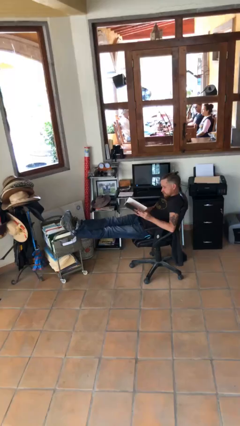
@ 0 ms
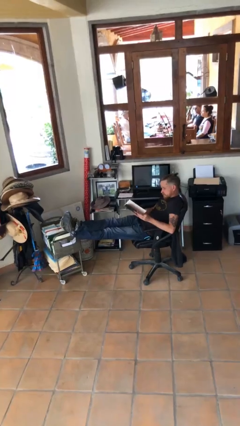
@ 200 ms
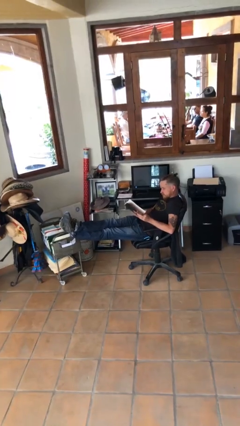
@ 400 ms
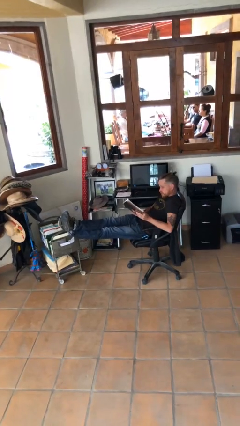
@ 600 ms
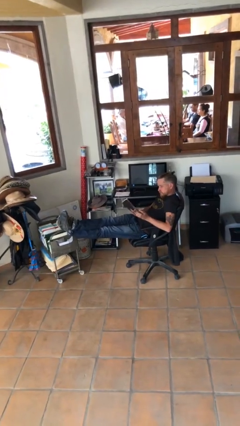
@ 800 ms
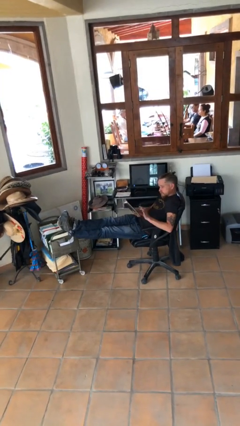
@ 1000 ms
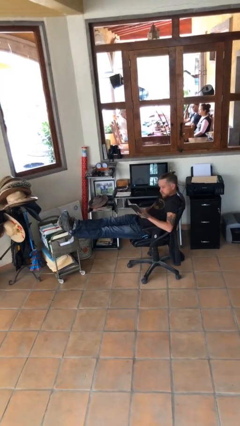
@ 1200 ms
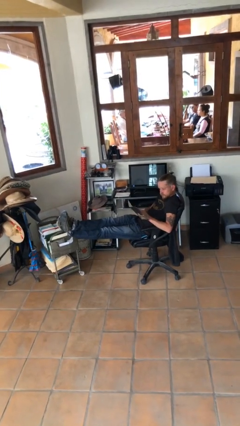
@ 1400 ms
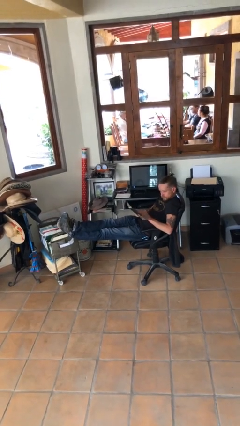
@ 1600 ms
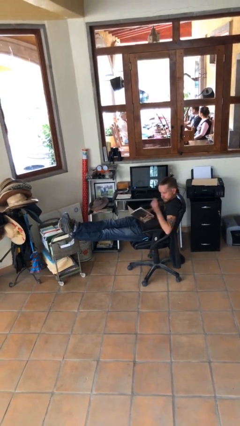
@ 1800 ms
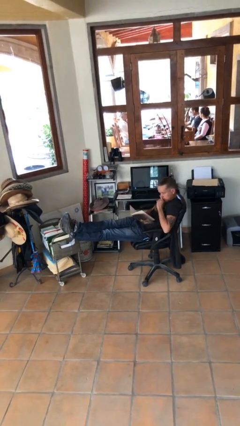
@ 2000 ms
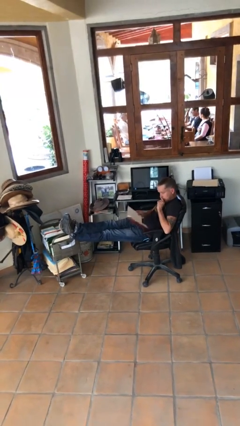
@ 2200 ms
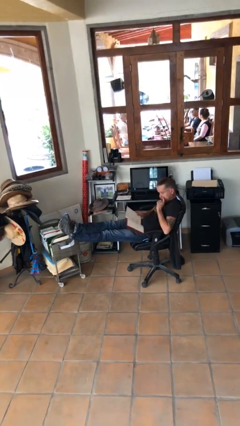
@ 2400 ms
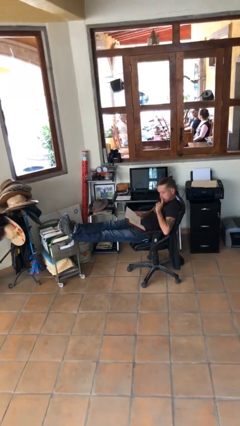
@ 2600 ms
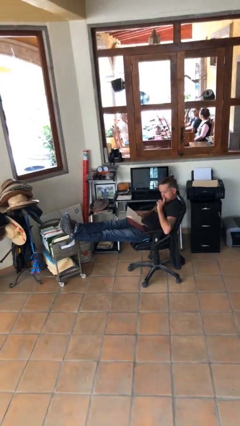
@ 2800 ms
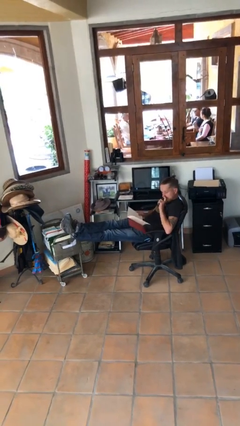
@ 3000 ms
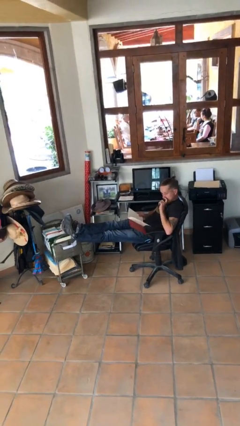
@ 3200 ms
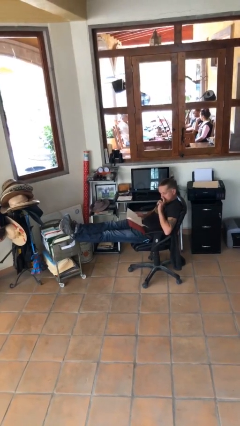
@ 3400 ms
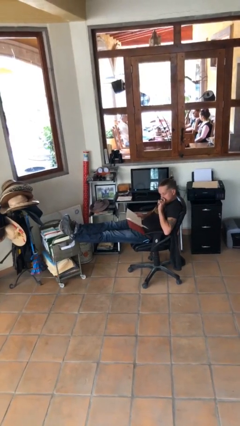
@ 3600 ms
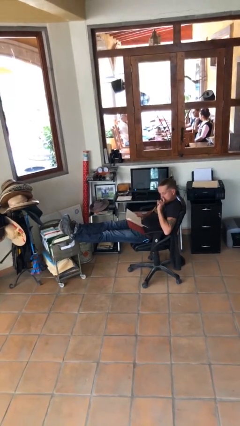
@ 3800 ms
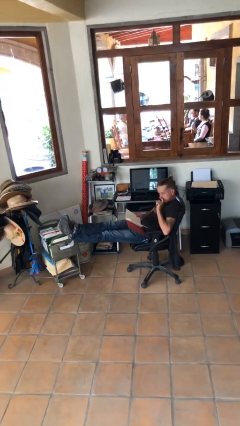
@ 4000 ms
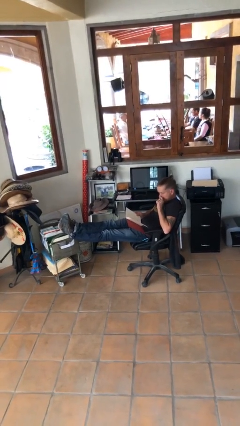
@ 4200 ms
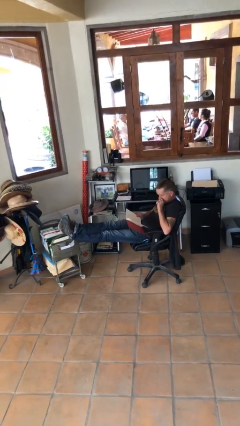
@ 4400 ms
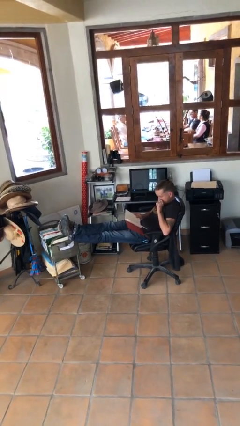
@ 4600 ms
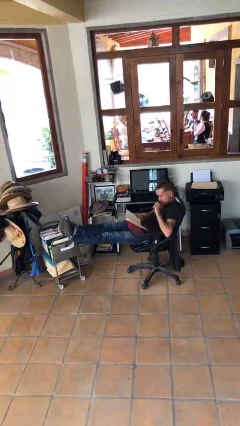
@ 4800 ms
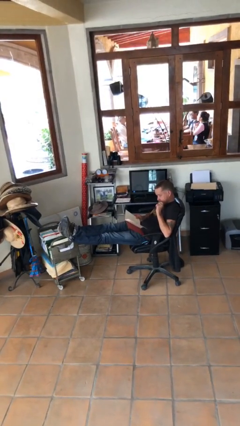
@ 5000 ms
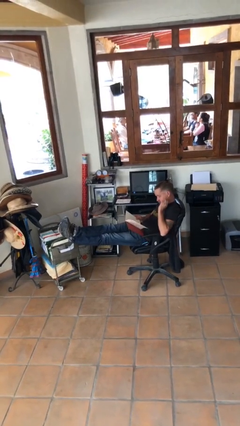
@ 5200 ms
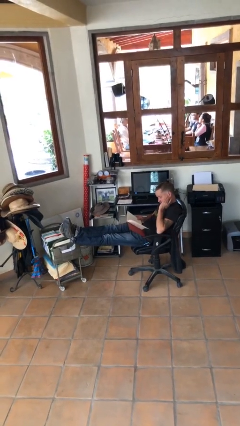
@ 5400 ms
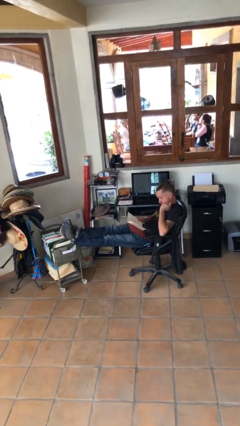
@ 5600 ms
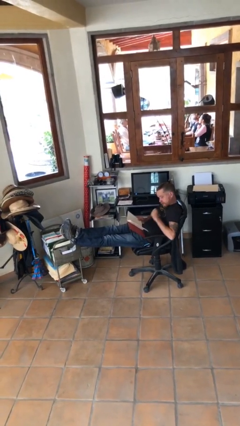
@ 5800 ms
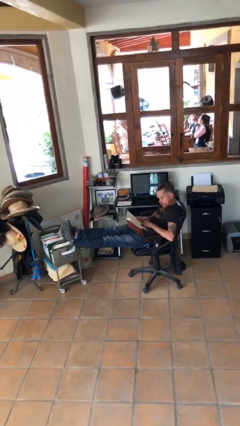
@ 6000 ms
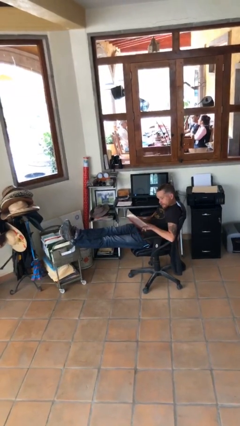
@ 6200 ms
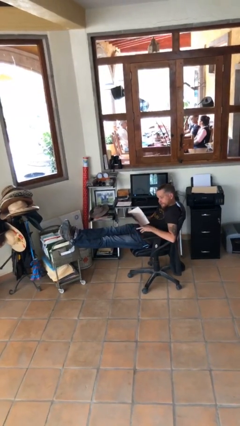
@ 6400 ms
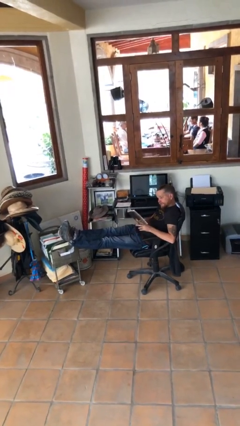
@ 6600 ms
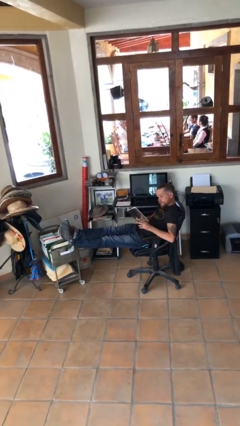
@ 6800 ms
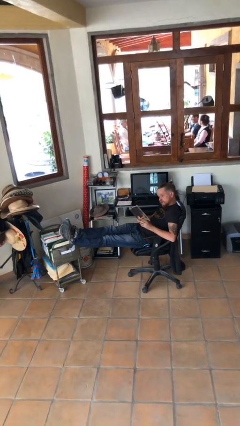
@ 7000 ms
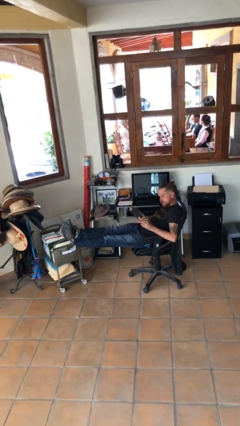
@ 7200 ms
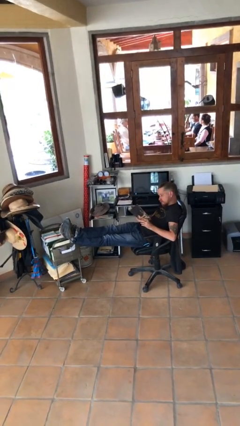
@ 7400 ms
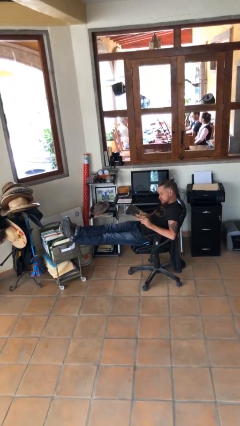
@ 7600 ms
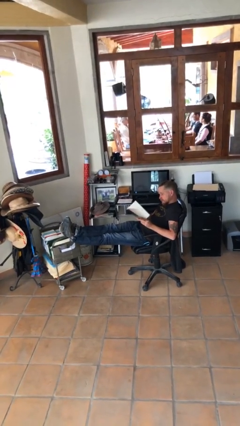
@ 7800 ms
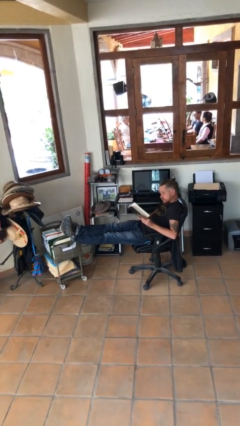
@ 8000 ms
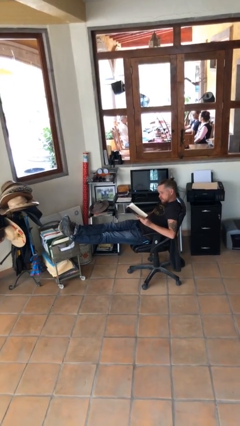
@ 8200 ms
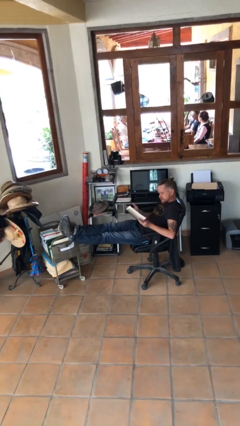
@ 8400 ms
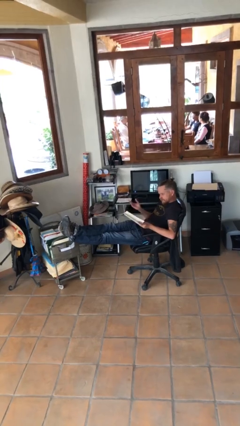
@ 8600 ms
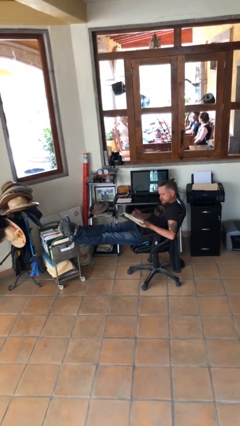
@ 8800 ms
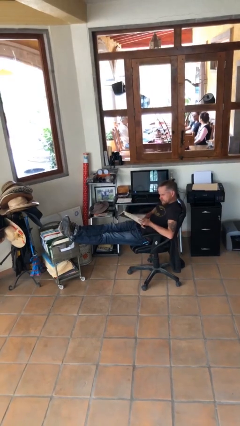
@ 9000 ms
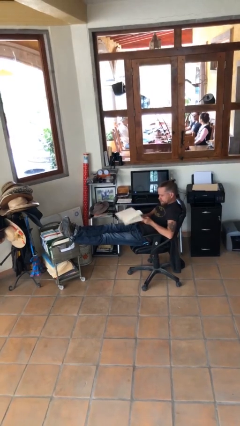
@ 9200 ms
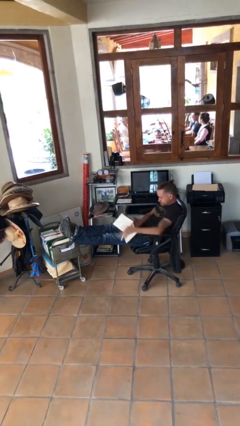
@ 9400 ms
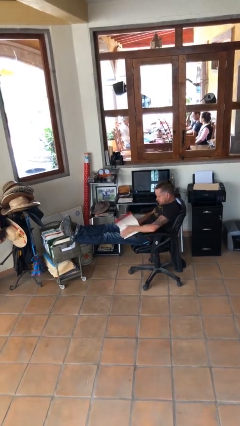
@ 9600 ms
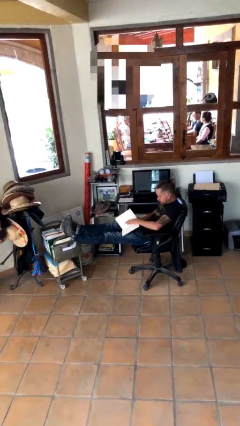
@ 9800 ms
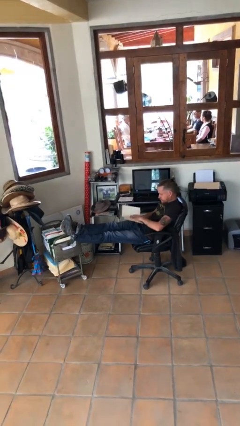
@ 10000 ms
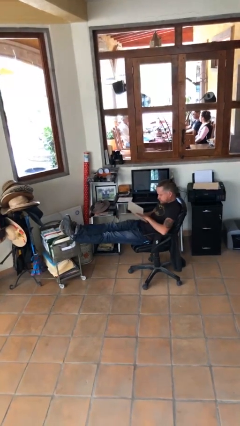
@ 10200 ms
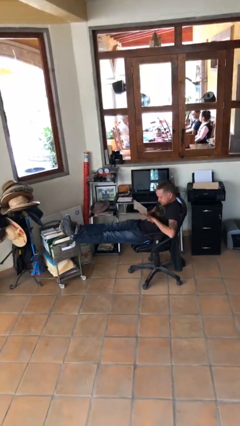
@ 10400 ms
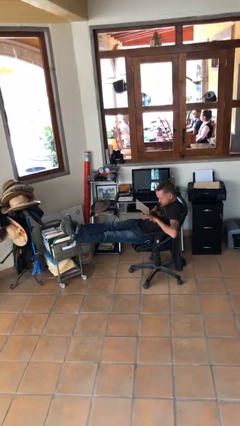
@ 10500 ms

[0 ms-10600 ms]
person reads document

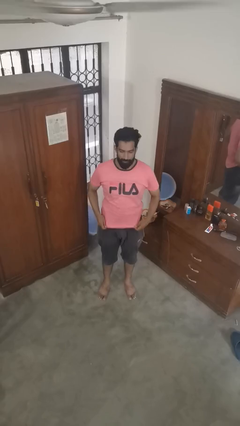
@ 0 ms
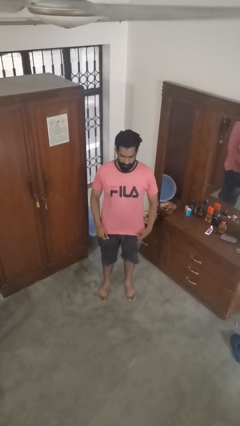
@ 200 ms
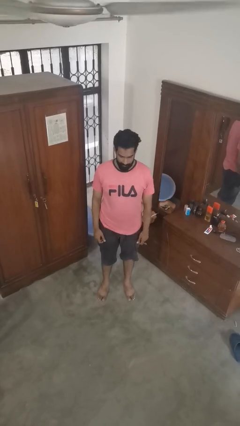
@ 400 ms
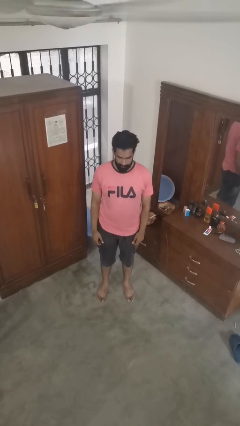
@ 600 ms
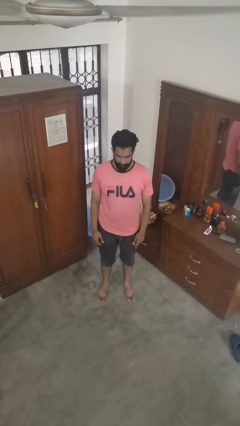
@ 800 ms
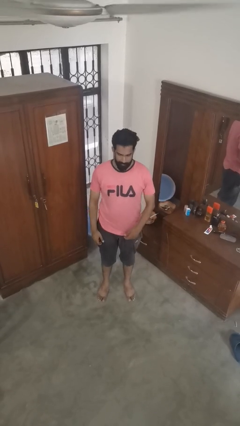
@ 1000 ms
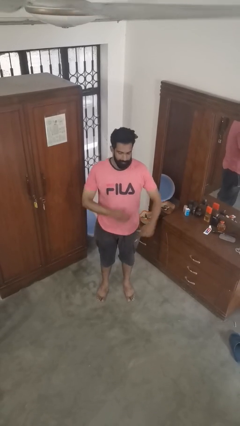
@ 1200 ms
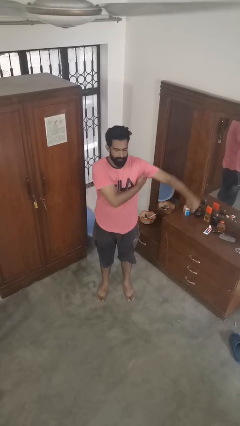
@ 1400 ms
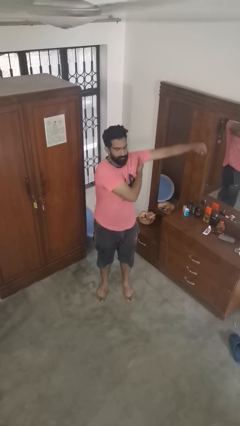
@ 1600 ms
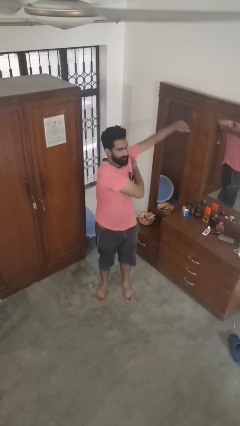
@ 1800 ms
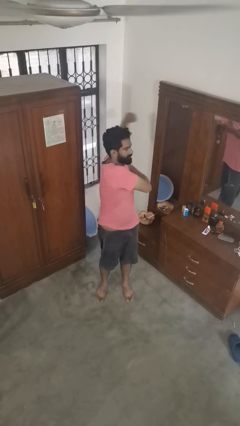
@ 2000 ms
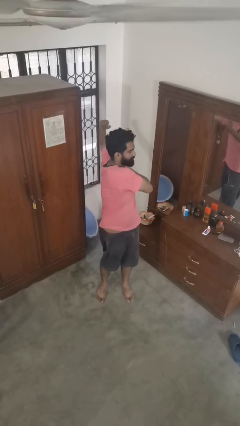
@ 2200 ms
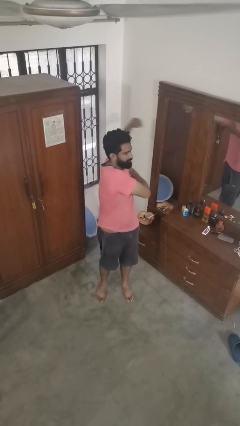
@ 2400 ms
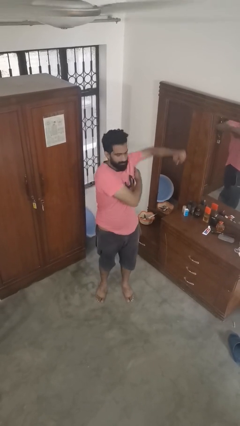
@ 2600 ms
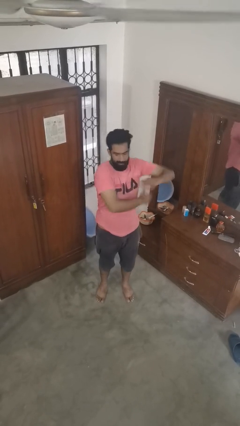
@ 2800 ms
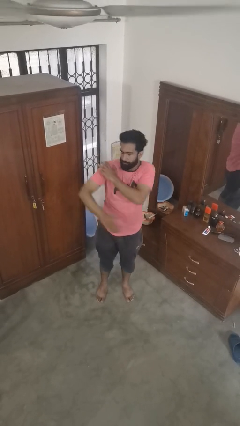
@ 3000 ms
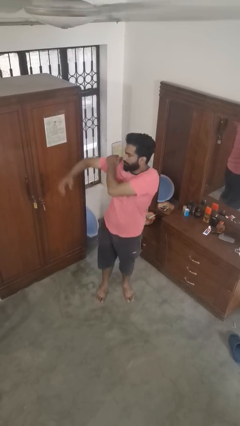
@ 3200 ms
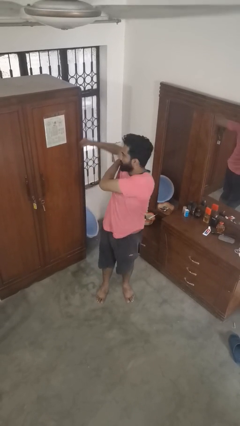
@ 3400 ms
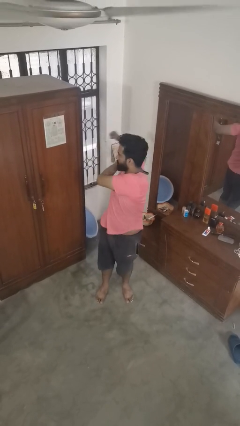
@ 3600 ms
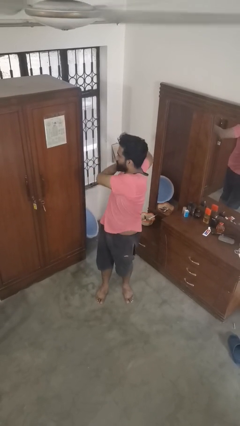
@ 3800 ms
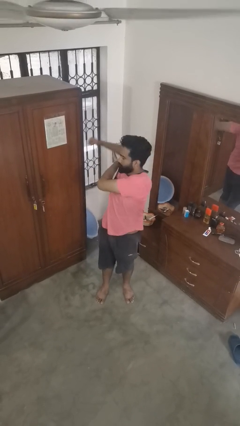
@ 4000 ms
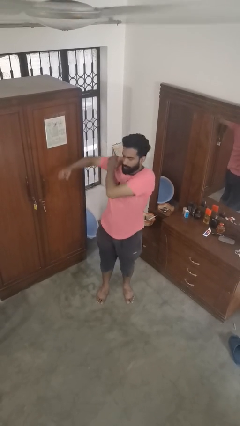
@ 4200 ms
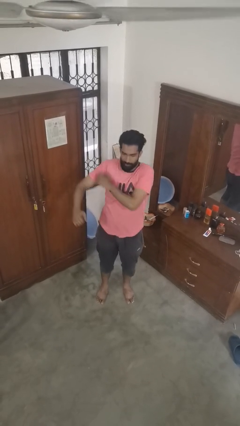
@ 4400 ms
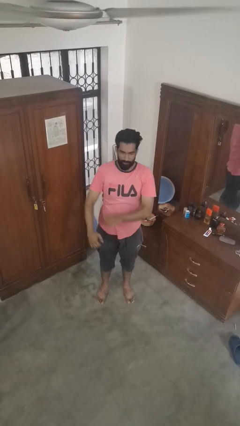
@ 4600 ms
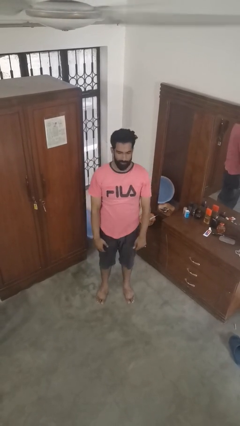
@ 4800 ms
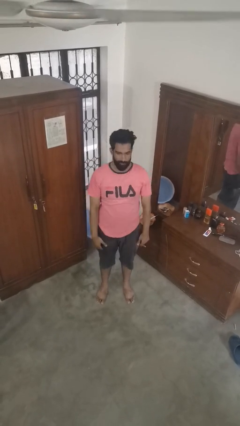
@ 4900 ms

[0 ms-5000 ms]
person stretches arms to side

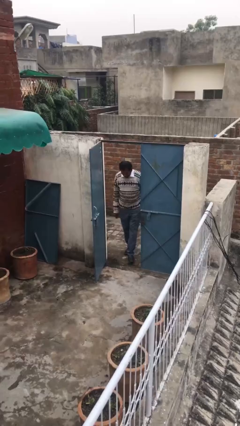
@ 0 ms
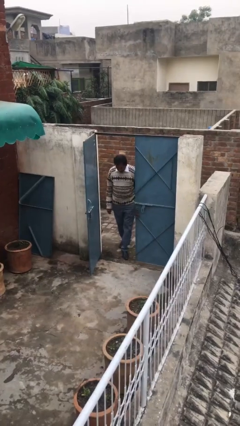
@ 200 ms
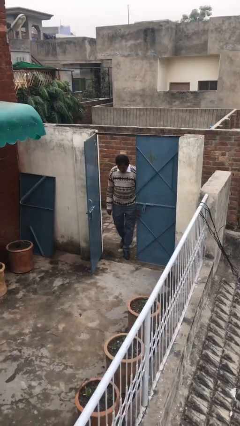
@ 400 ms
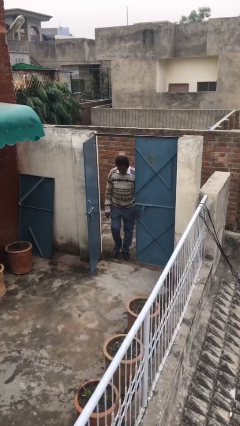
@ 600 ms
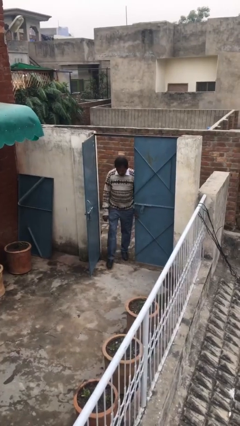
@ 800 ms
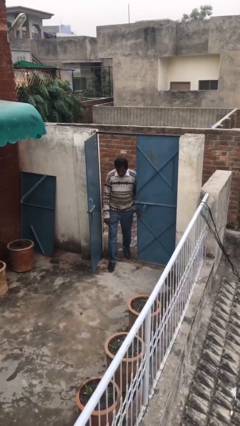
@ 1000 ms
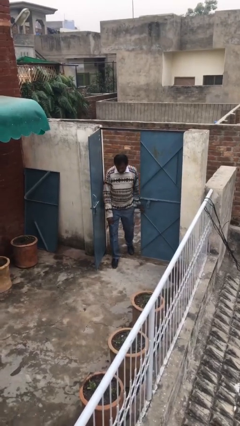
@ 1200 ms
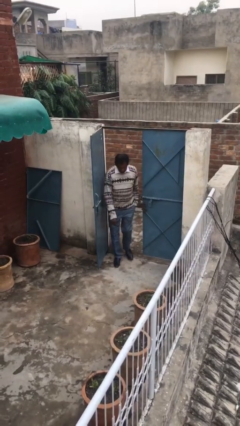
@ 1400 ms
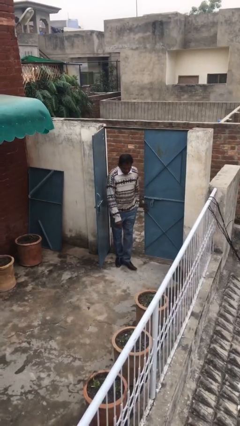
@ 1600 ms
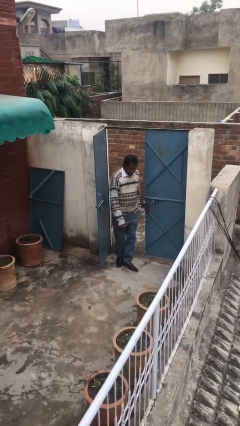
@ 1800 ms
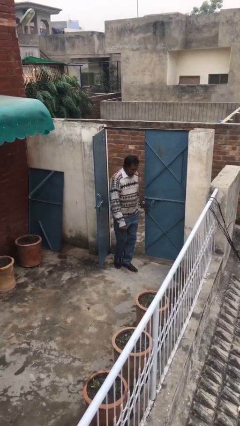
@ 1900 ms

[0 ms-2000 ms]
person enters scene through structure

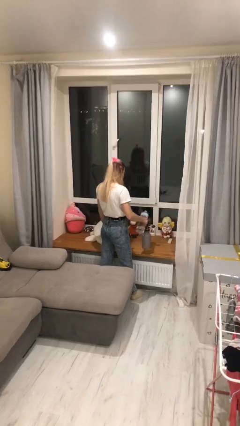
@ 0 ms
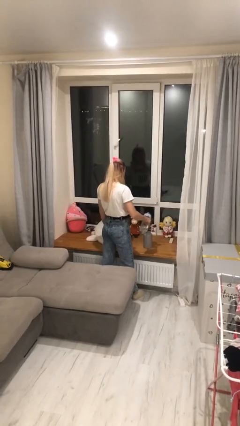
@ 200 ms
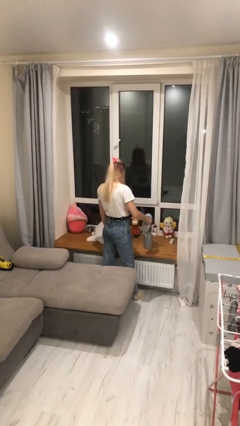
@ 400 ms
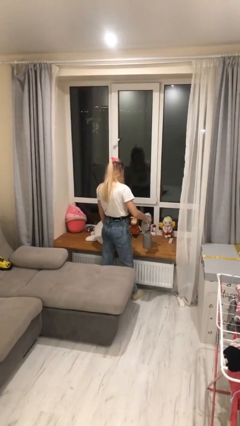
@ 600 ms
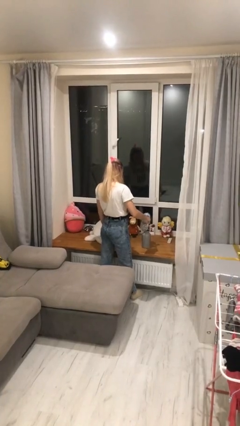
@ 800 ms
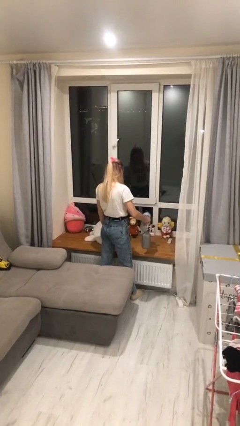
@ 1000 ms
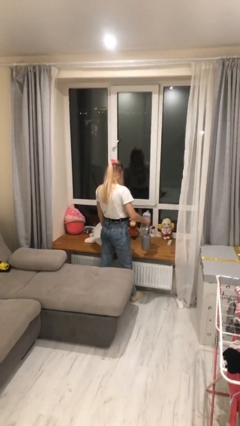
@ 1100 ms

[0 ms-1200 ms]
person waters houseplant
